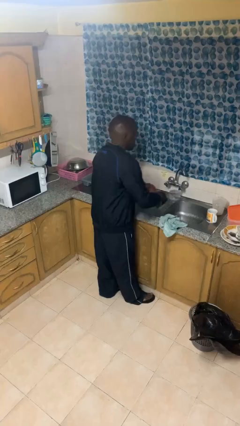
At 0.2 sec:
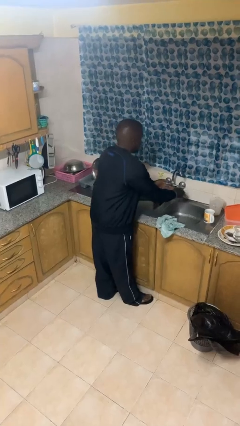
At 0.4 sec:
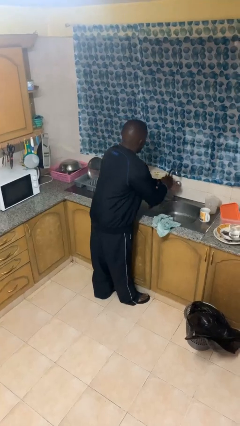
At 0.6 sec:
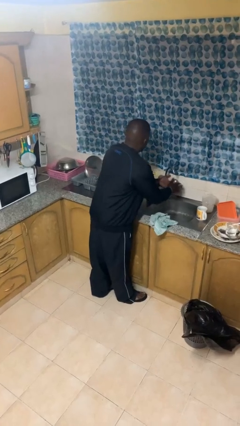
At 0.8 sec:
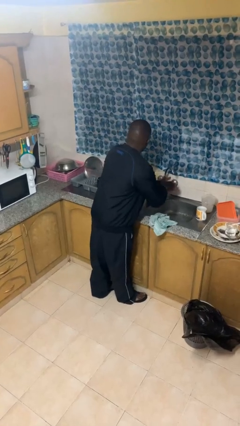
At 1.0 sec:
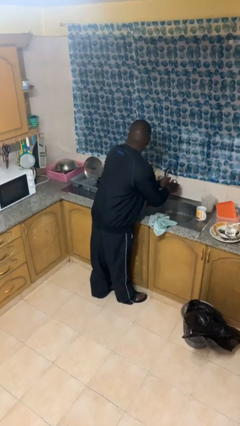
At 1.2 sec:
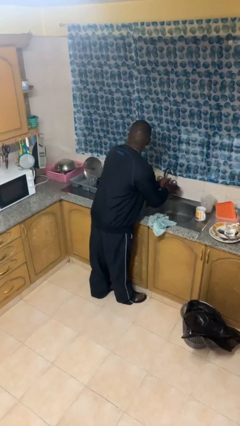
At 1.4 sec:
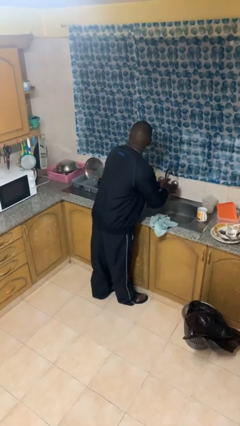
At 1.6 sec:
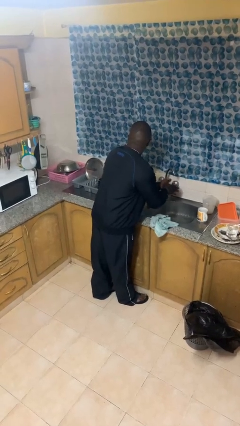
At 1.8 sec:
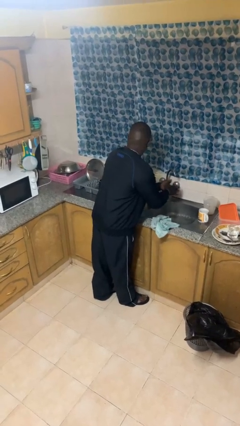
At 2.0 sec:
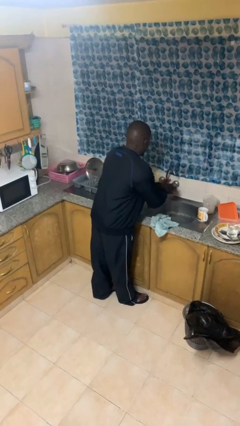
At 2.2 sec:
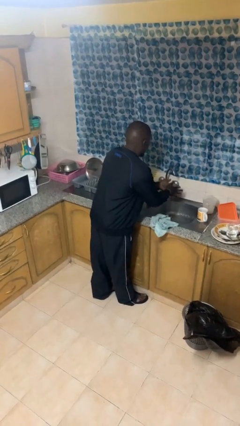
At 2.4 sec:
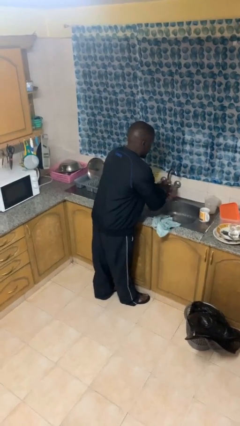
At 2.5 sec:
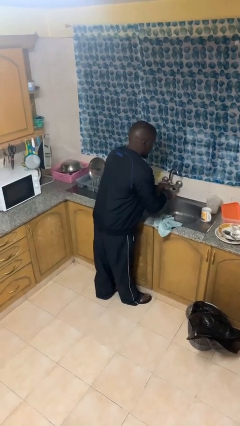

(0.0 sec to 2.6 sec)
person washes hands

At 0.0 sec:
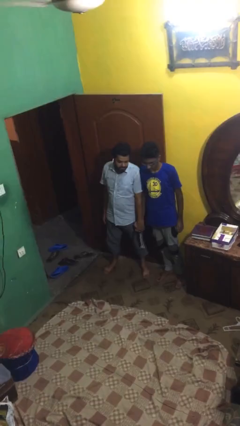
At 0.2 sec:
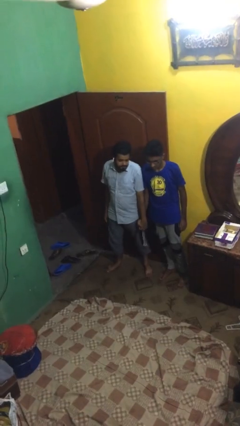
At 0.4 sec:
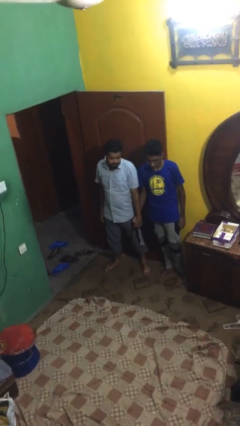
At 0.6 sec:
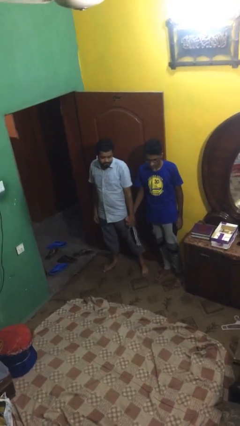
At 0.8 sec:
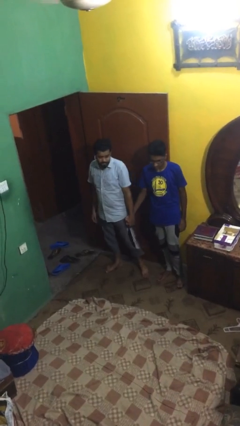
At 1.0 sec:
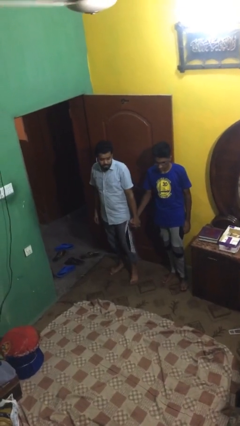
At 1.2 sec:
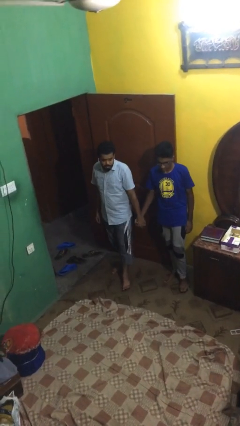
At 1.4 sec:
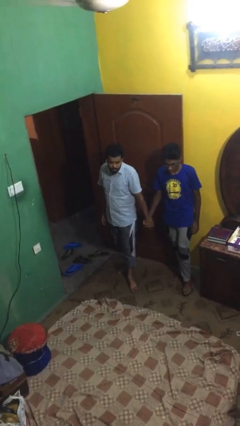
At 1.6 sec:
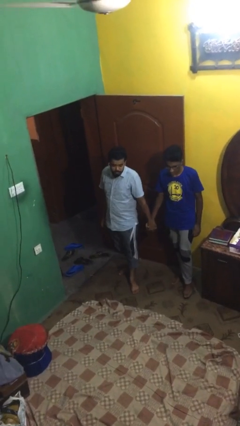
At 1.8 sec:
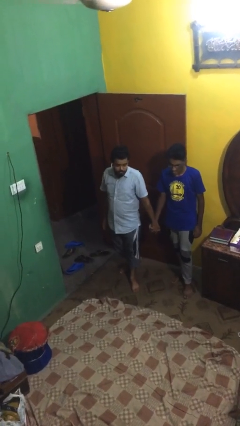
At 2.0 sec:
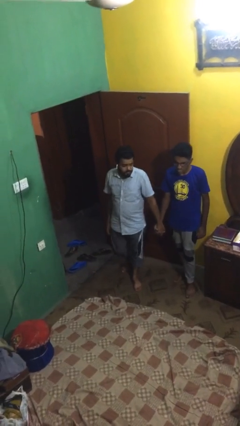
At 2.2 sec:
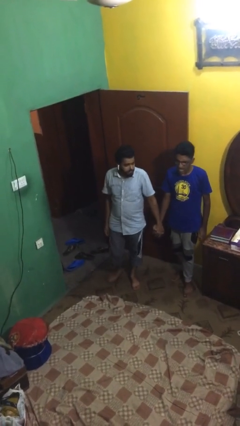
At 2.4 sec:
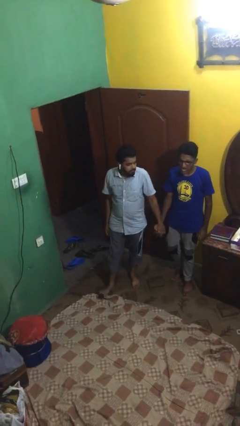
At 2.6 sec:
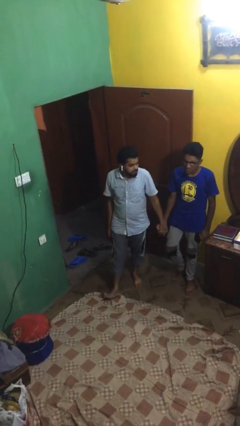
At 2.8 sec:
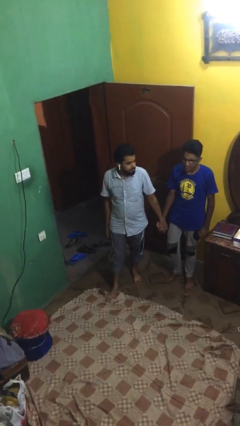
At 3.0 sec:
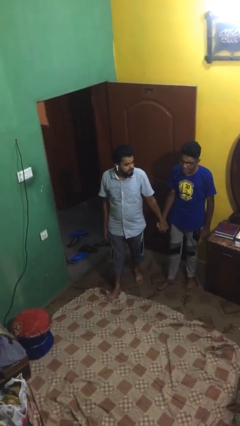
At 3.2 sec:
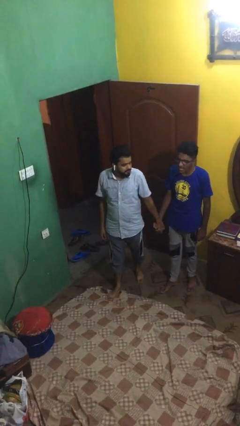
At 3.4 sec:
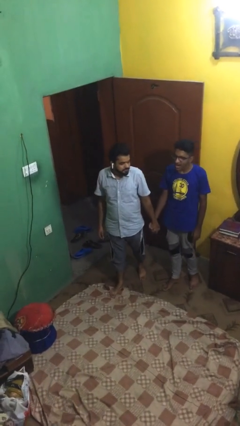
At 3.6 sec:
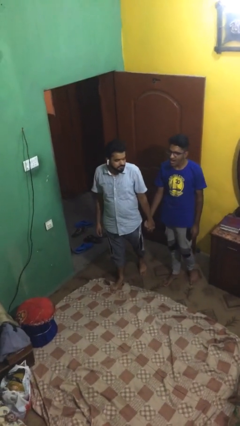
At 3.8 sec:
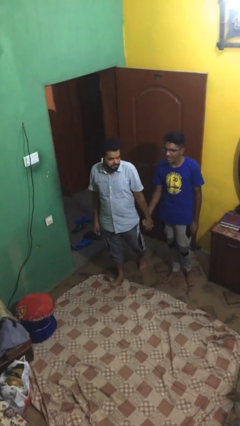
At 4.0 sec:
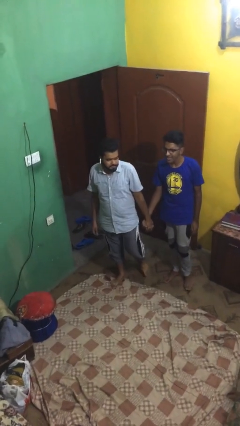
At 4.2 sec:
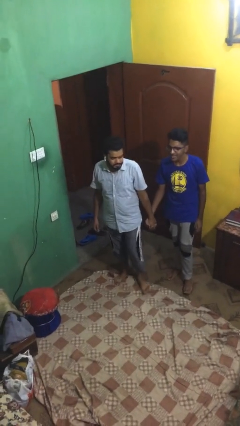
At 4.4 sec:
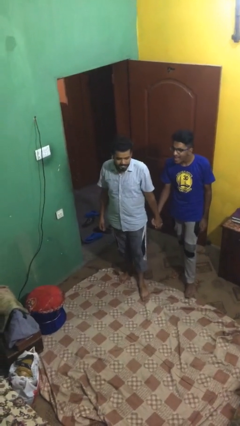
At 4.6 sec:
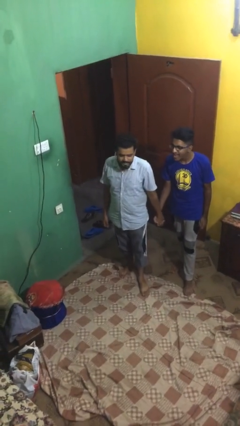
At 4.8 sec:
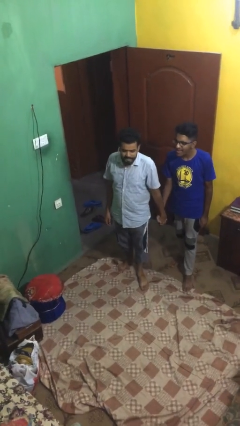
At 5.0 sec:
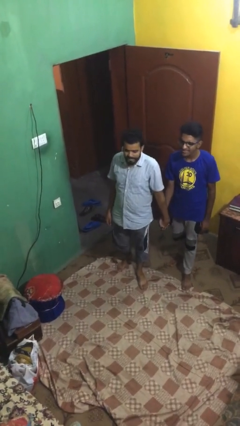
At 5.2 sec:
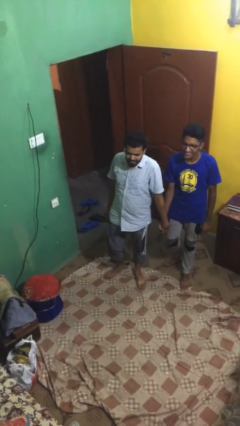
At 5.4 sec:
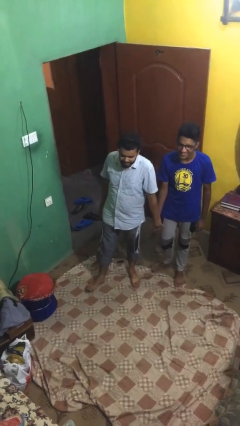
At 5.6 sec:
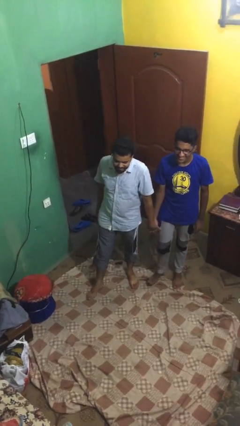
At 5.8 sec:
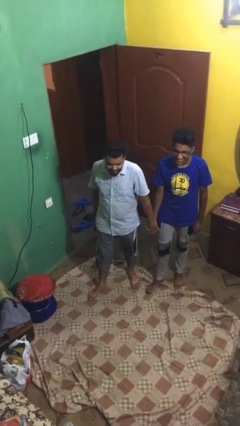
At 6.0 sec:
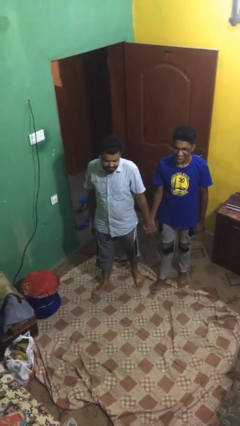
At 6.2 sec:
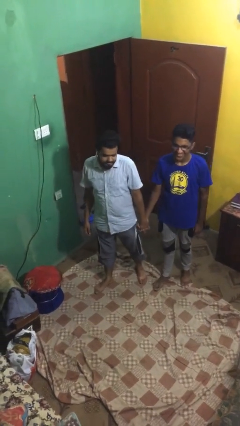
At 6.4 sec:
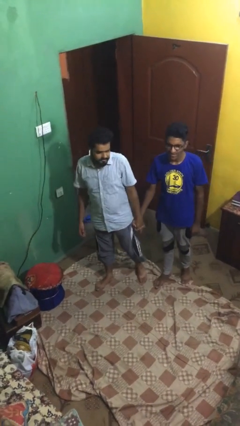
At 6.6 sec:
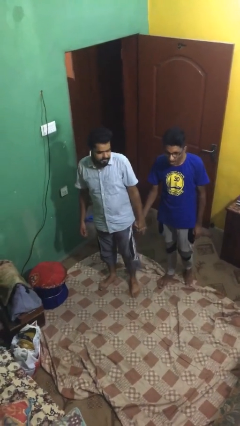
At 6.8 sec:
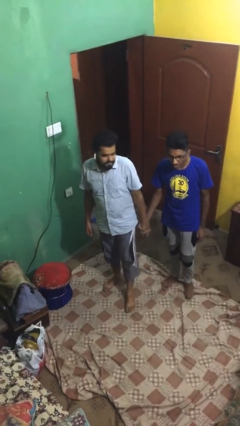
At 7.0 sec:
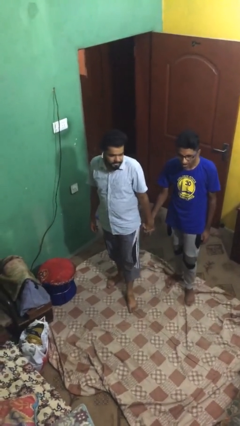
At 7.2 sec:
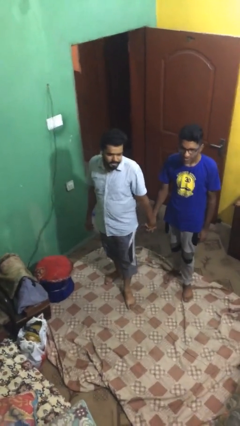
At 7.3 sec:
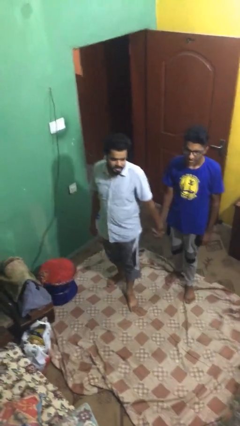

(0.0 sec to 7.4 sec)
person holds hand

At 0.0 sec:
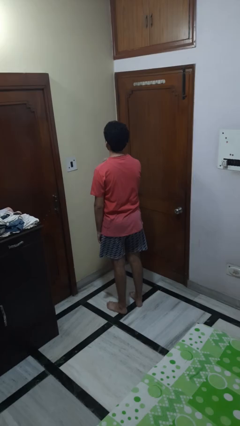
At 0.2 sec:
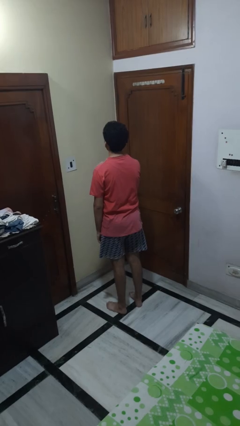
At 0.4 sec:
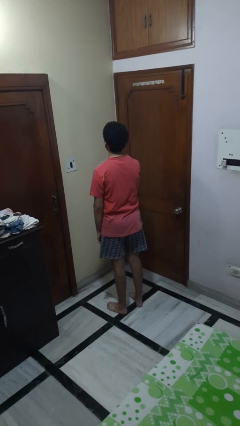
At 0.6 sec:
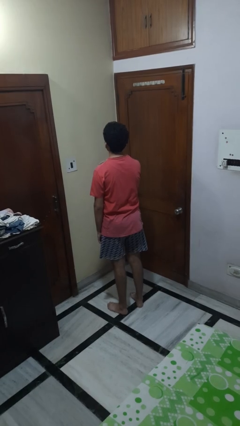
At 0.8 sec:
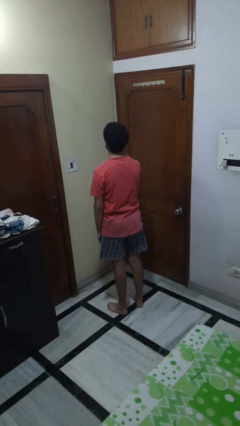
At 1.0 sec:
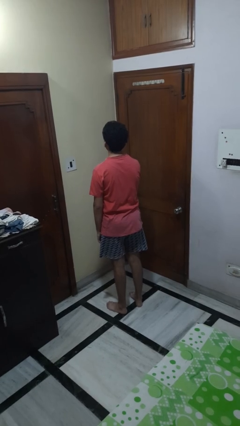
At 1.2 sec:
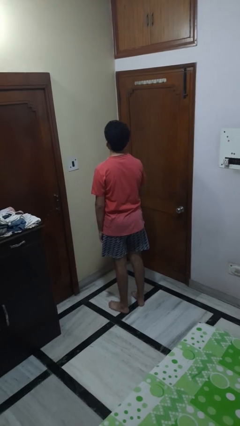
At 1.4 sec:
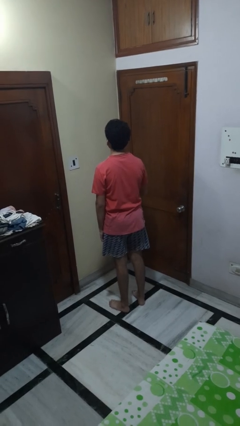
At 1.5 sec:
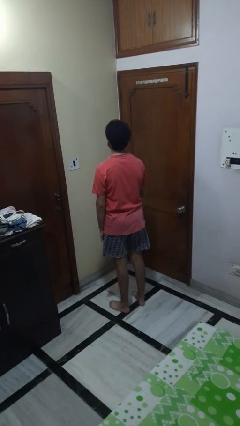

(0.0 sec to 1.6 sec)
person gestures cut

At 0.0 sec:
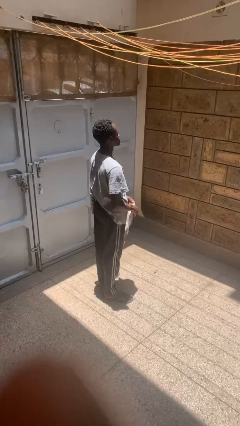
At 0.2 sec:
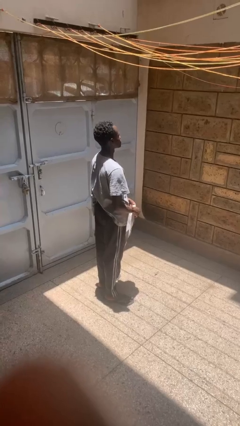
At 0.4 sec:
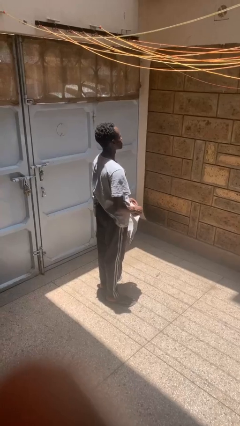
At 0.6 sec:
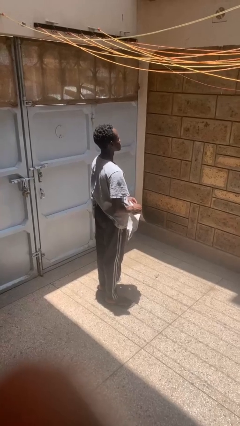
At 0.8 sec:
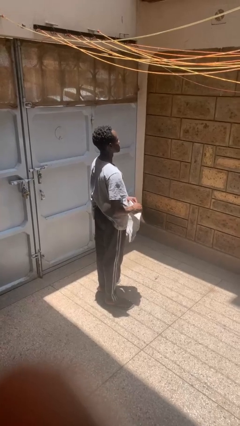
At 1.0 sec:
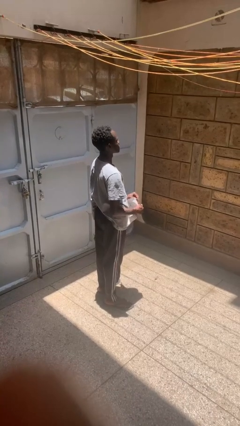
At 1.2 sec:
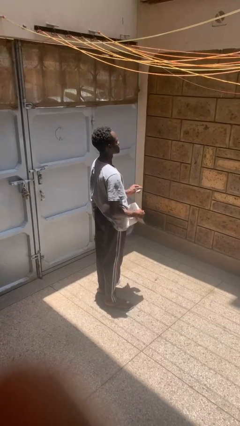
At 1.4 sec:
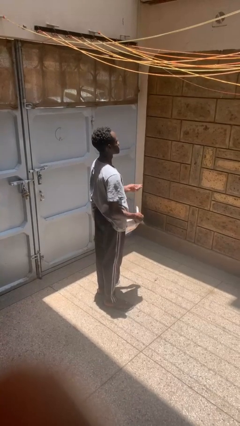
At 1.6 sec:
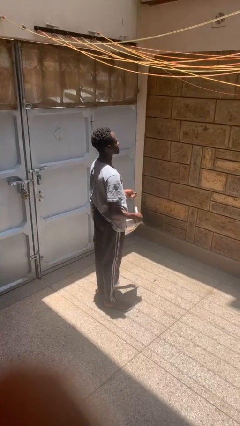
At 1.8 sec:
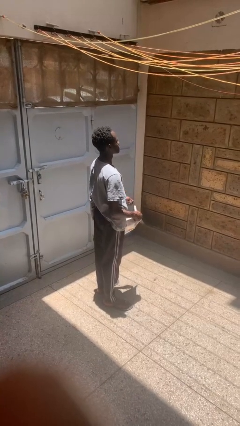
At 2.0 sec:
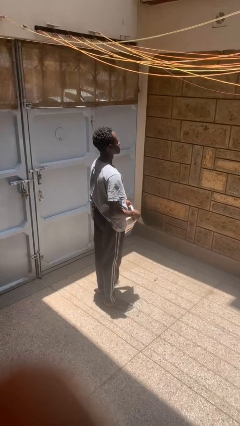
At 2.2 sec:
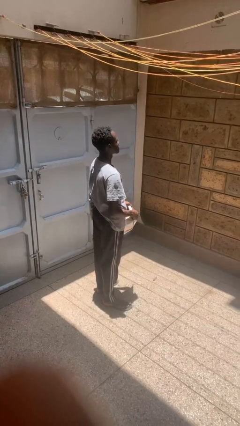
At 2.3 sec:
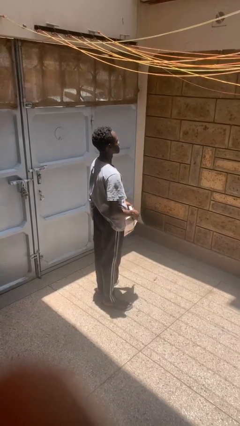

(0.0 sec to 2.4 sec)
person tears paper

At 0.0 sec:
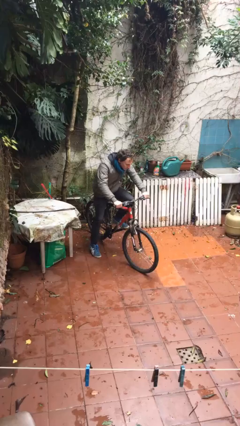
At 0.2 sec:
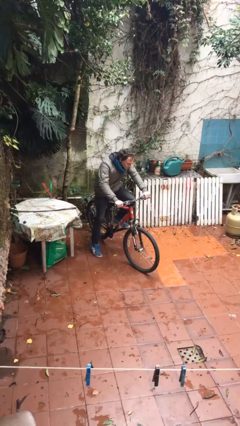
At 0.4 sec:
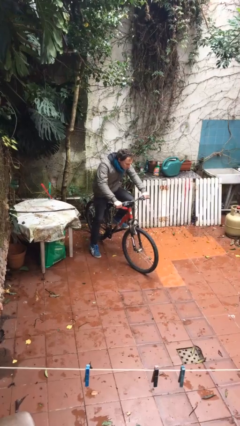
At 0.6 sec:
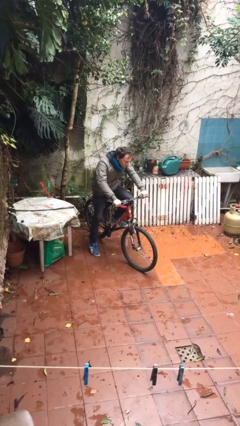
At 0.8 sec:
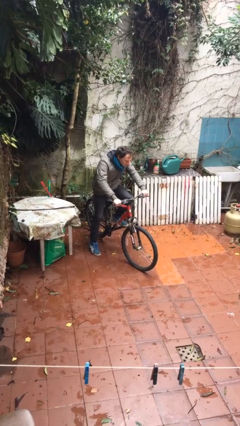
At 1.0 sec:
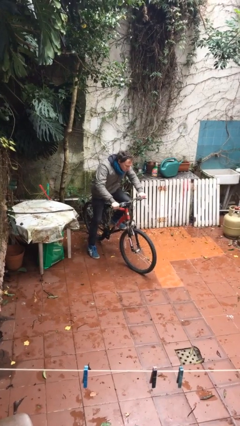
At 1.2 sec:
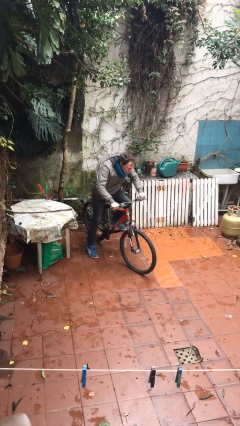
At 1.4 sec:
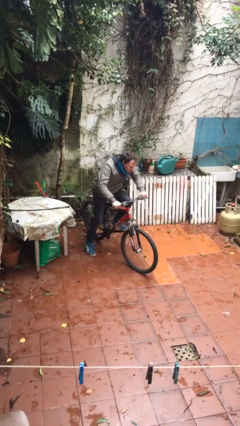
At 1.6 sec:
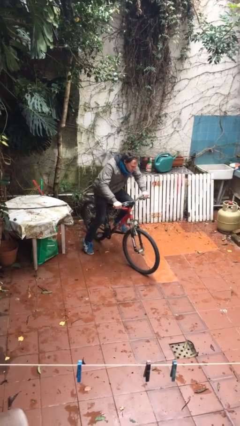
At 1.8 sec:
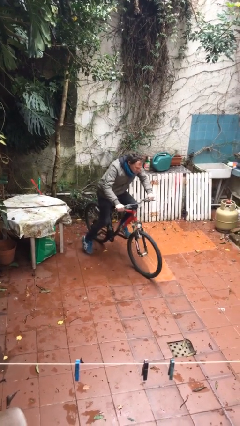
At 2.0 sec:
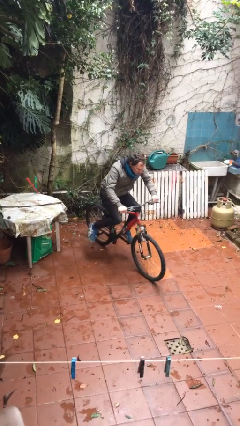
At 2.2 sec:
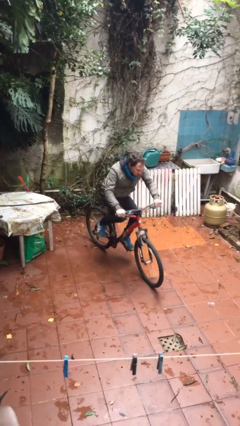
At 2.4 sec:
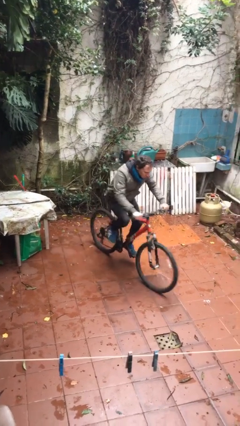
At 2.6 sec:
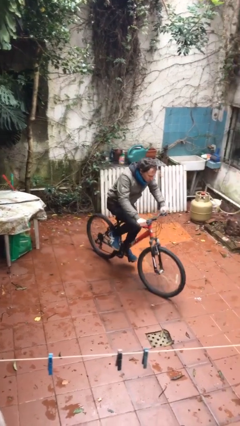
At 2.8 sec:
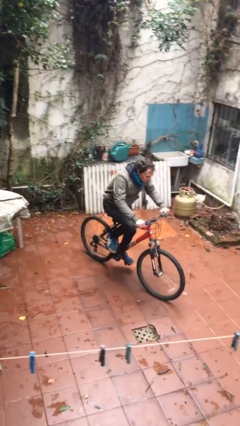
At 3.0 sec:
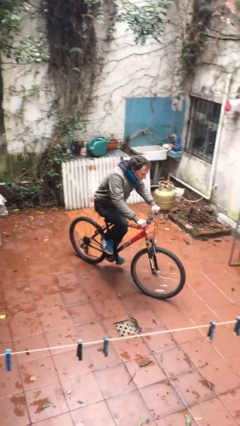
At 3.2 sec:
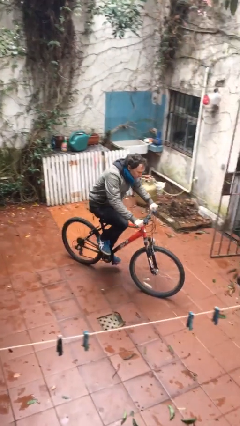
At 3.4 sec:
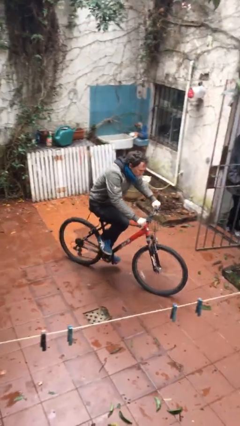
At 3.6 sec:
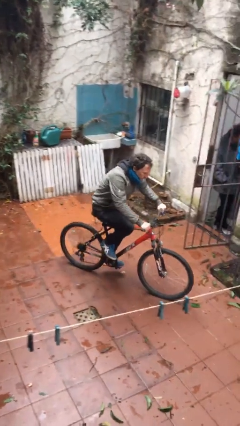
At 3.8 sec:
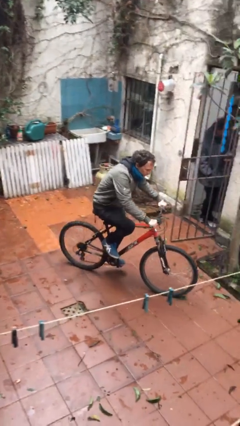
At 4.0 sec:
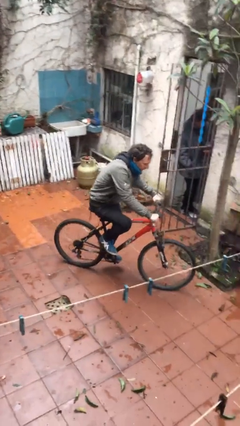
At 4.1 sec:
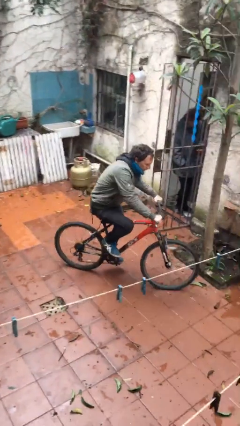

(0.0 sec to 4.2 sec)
person rides bicycle
